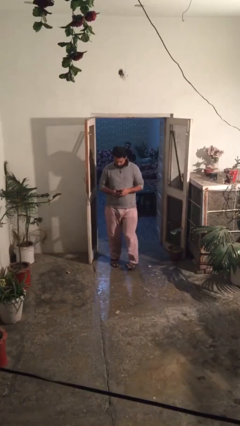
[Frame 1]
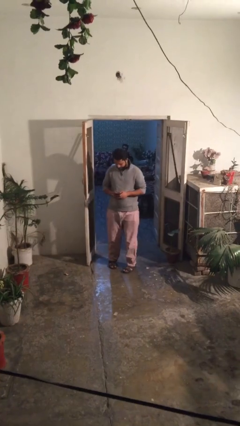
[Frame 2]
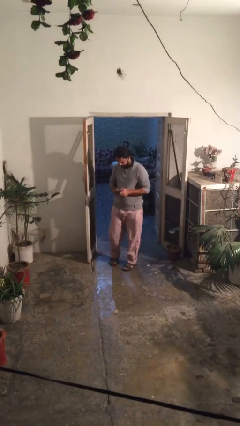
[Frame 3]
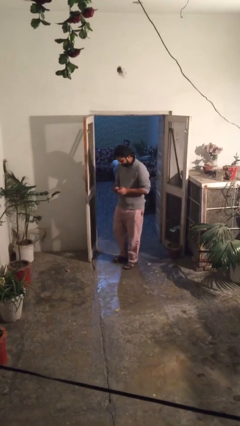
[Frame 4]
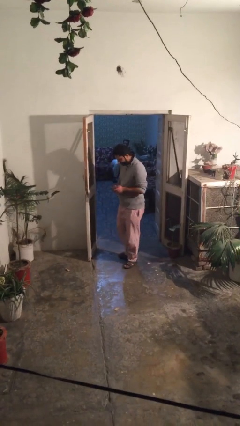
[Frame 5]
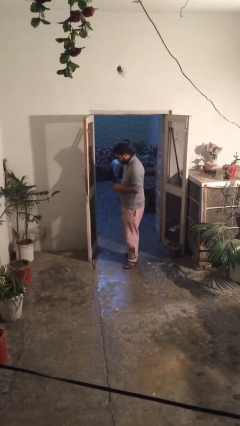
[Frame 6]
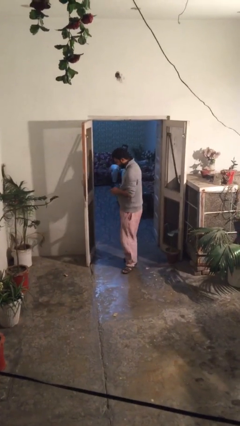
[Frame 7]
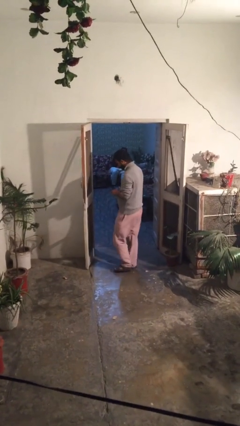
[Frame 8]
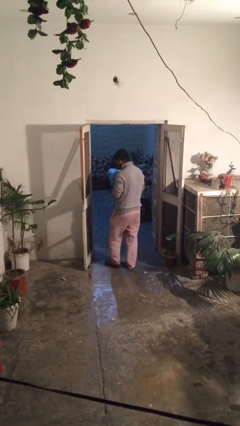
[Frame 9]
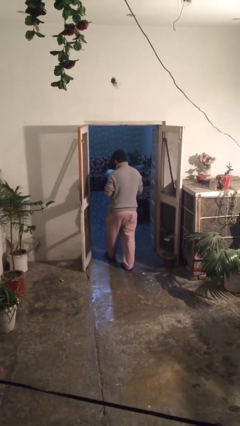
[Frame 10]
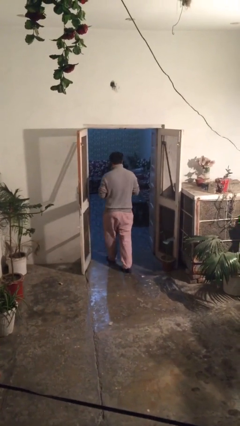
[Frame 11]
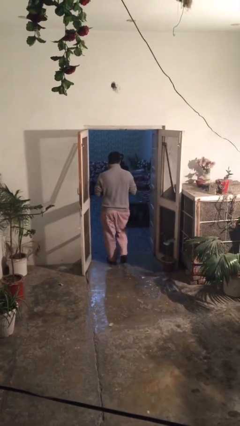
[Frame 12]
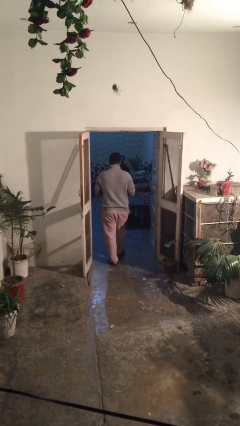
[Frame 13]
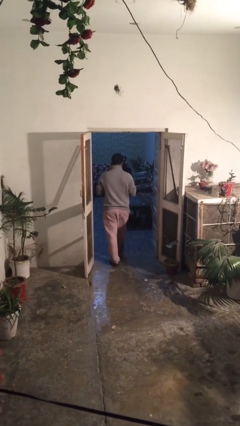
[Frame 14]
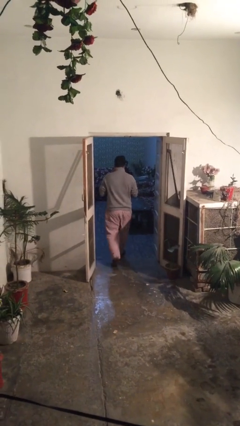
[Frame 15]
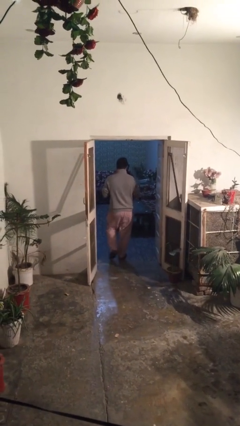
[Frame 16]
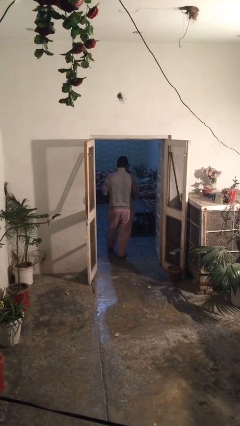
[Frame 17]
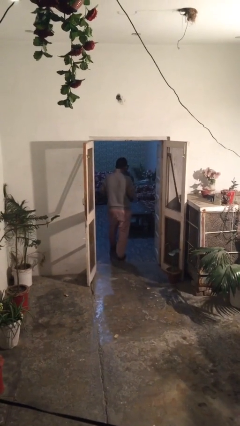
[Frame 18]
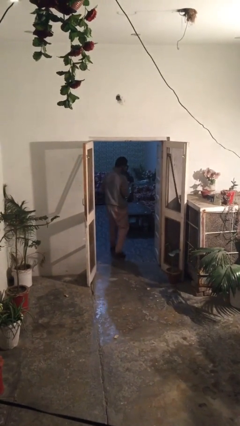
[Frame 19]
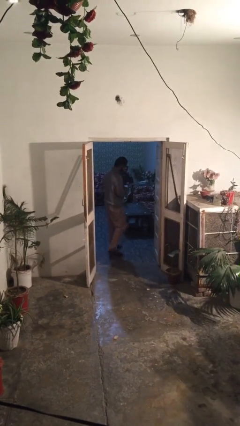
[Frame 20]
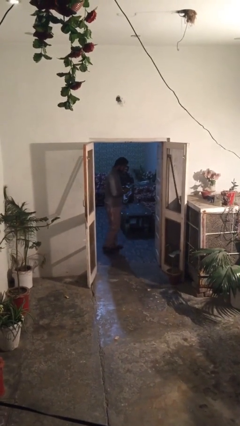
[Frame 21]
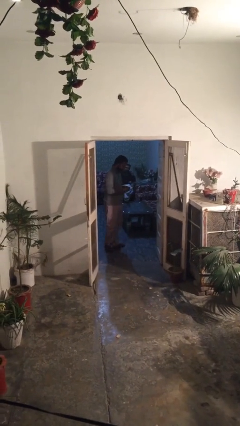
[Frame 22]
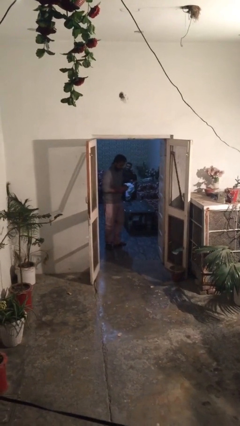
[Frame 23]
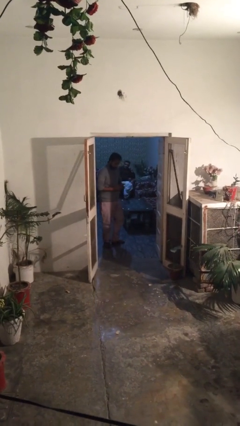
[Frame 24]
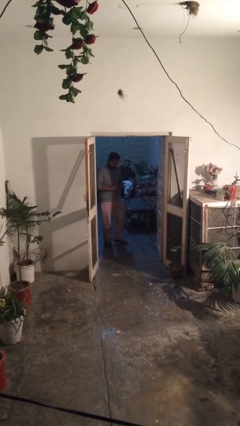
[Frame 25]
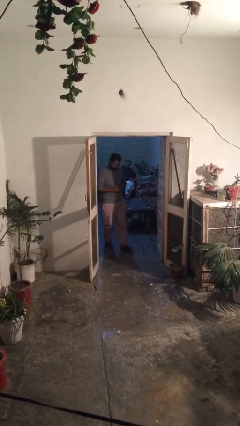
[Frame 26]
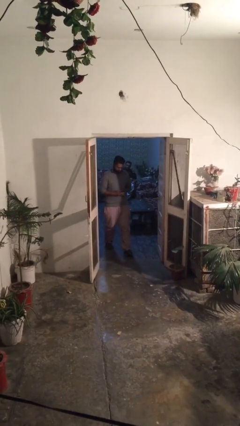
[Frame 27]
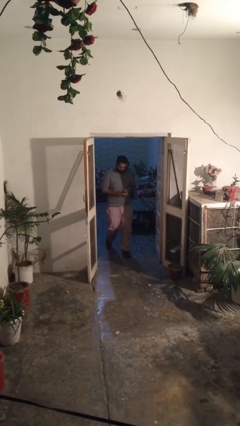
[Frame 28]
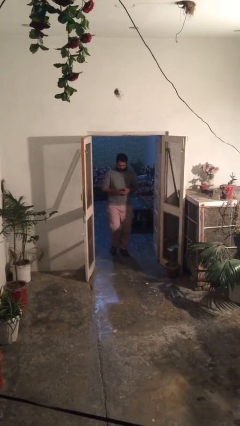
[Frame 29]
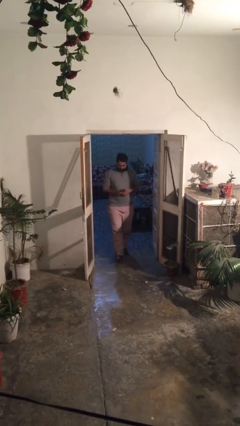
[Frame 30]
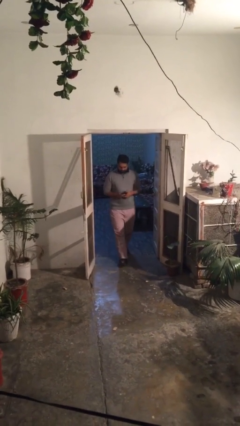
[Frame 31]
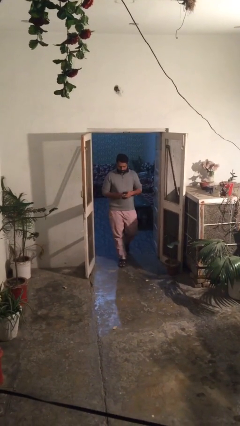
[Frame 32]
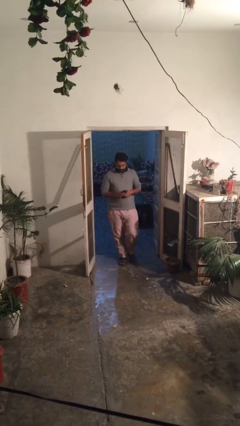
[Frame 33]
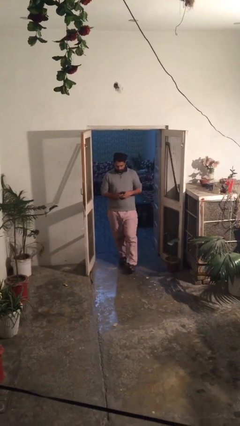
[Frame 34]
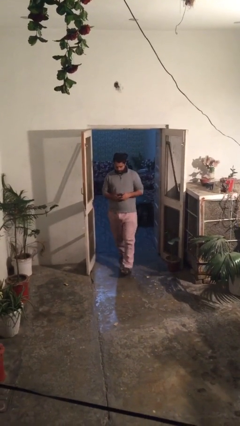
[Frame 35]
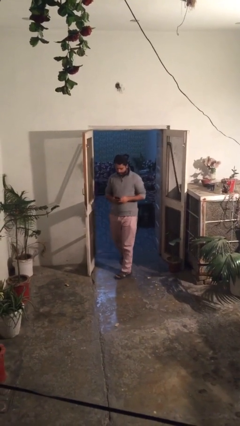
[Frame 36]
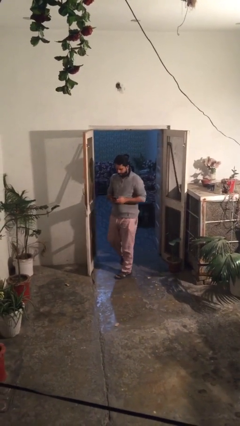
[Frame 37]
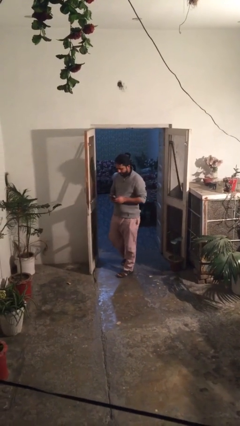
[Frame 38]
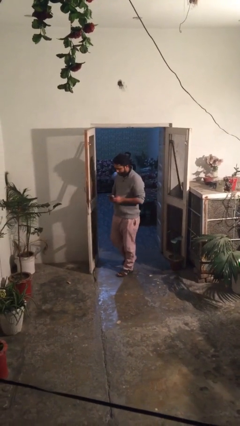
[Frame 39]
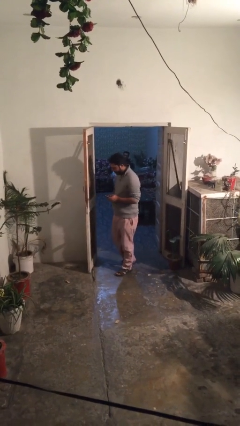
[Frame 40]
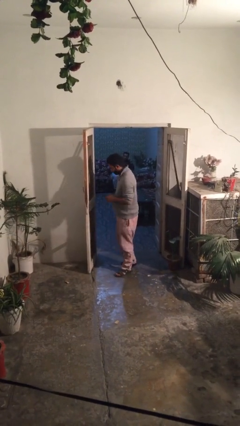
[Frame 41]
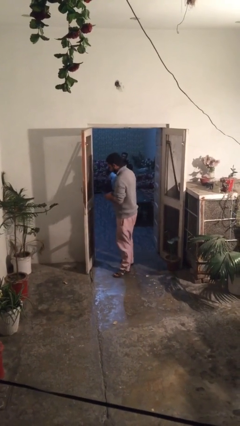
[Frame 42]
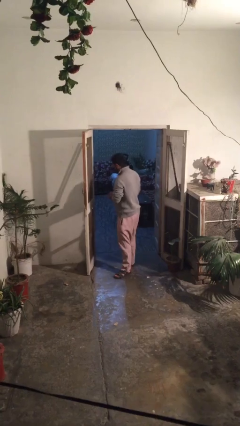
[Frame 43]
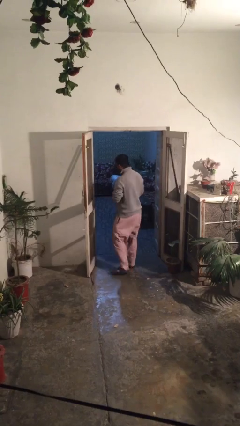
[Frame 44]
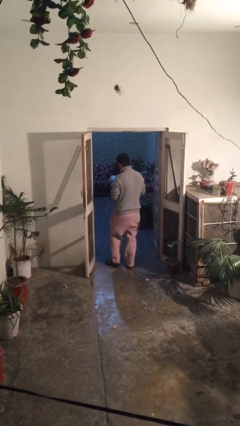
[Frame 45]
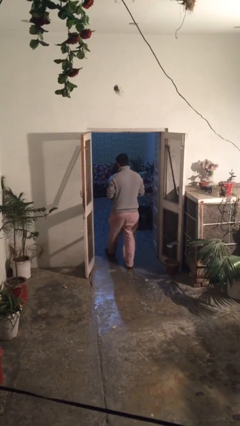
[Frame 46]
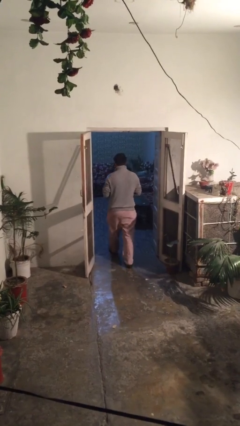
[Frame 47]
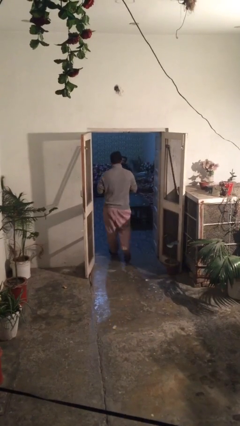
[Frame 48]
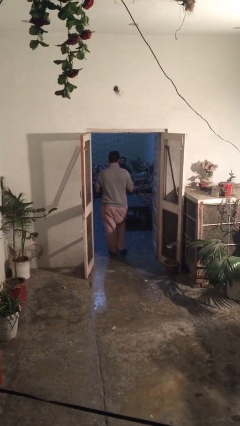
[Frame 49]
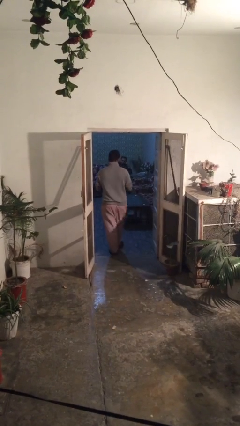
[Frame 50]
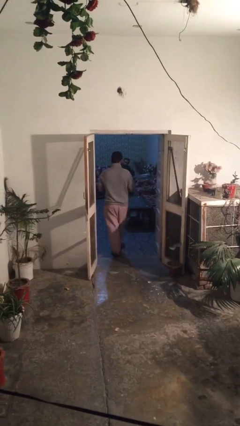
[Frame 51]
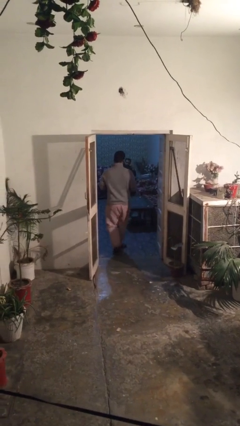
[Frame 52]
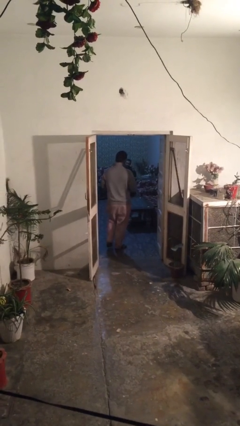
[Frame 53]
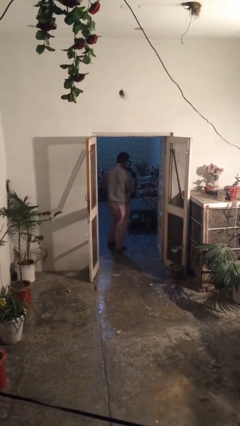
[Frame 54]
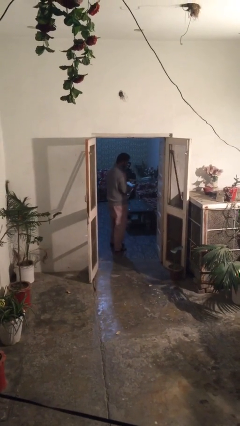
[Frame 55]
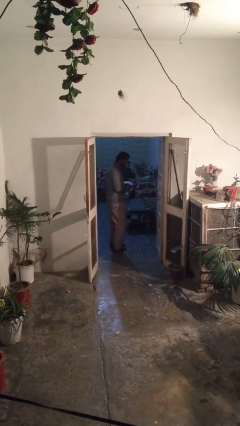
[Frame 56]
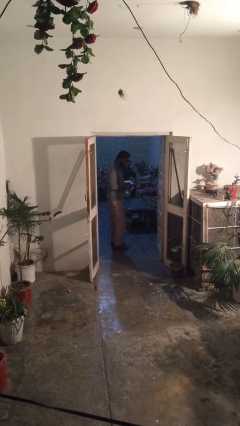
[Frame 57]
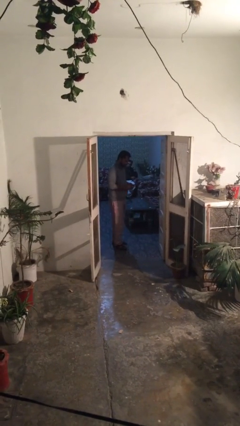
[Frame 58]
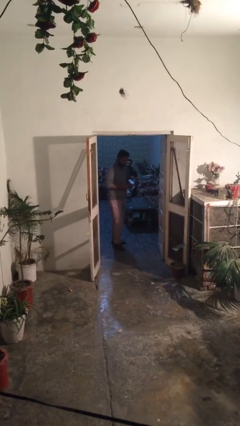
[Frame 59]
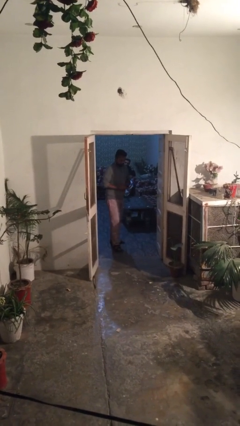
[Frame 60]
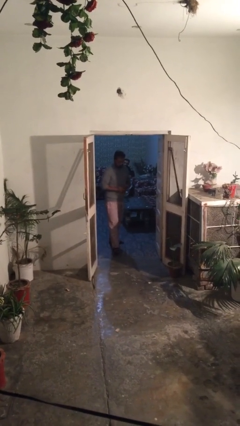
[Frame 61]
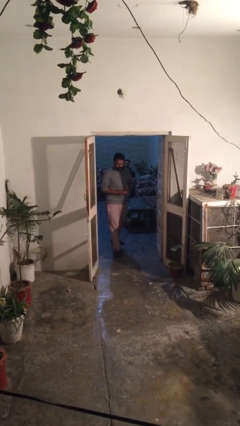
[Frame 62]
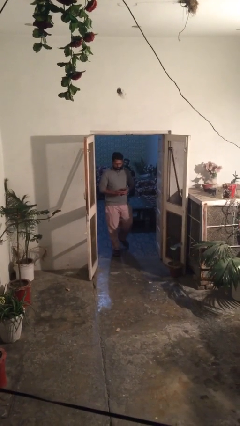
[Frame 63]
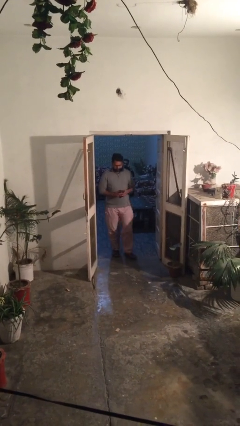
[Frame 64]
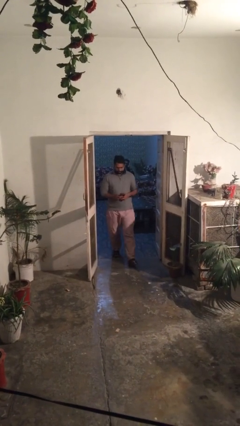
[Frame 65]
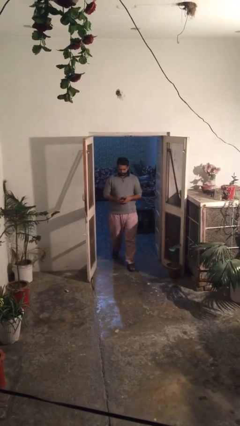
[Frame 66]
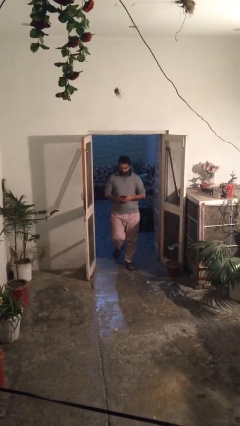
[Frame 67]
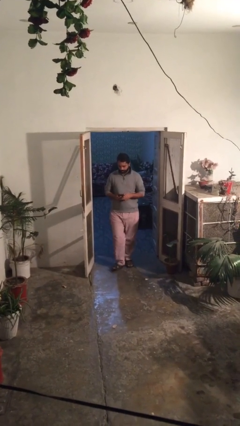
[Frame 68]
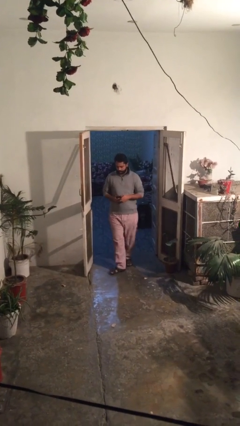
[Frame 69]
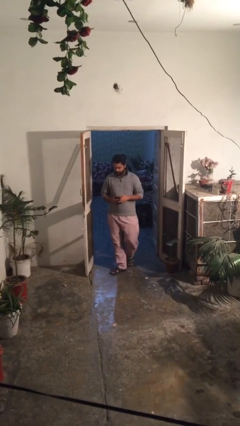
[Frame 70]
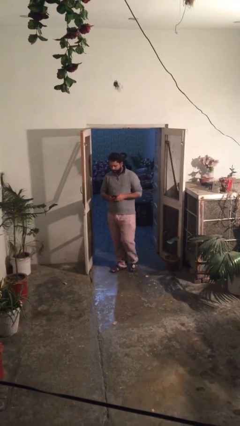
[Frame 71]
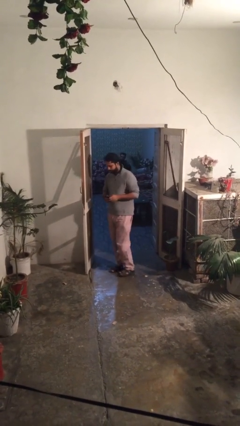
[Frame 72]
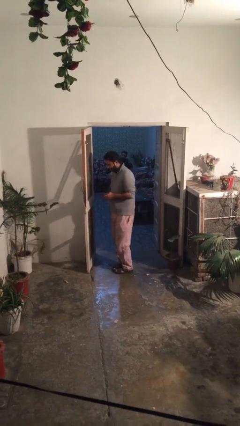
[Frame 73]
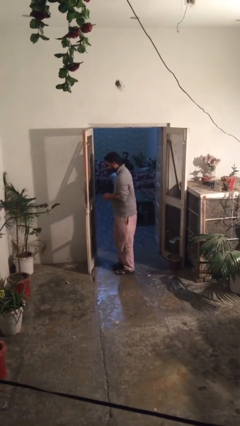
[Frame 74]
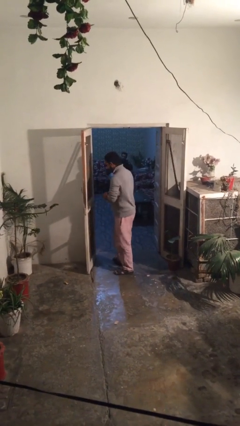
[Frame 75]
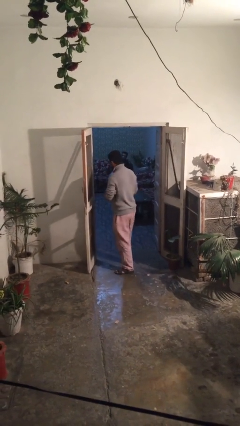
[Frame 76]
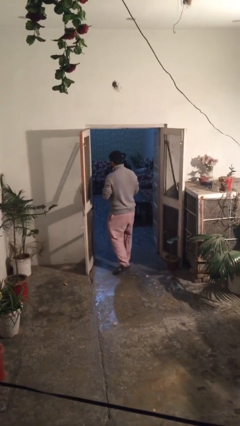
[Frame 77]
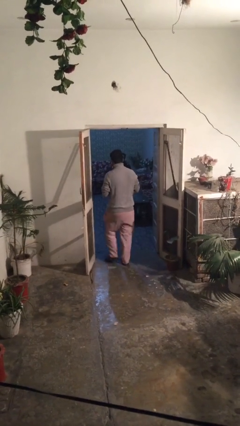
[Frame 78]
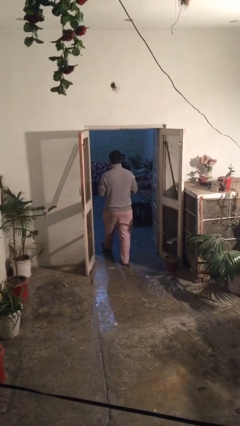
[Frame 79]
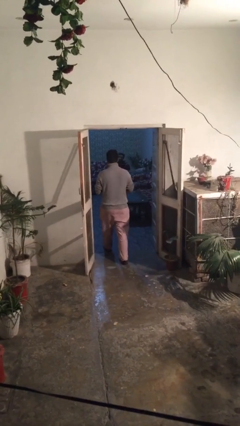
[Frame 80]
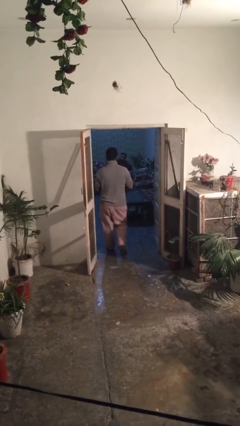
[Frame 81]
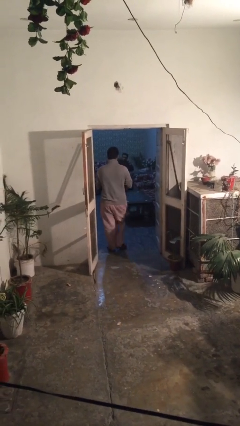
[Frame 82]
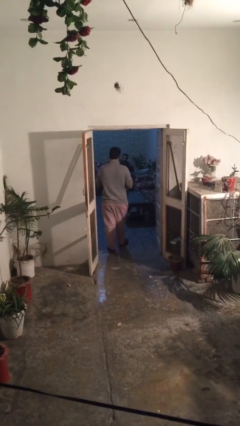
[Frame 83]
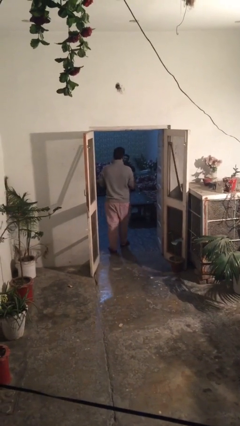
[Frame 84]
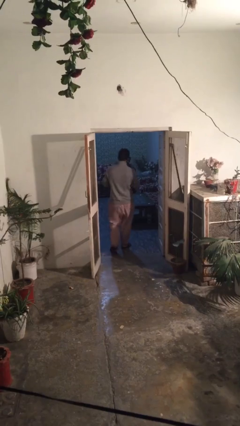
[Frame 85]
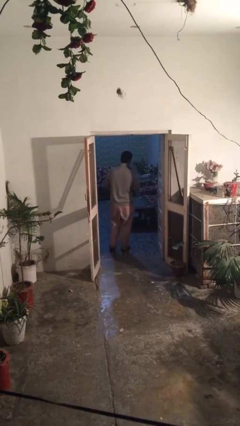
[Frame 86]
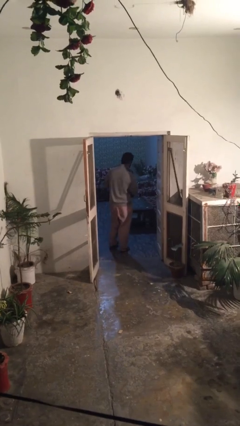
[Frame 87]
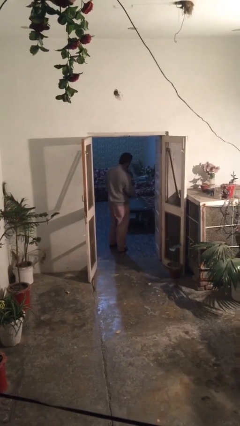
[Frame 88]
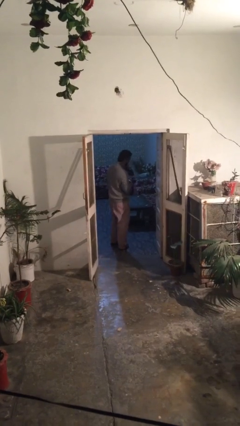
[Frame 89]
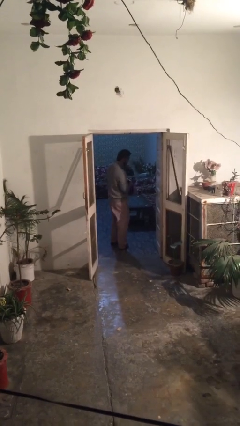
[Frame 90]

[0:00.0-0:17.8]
person texts on phone

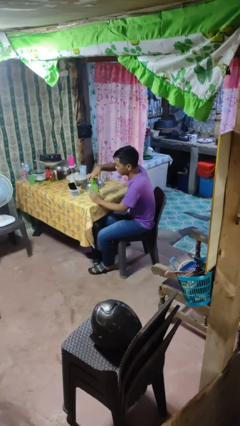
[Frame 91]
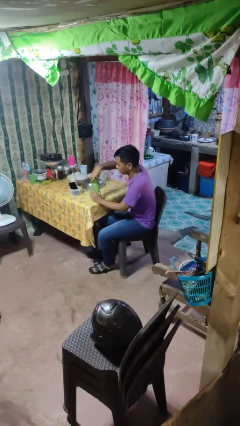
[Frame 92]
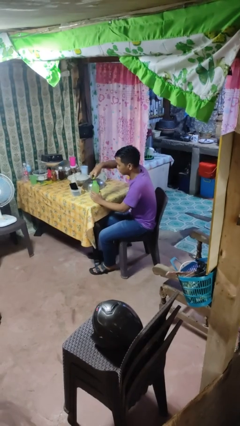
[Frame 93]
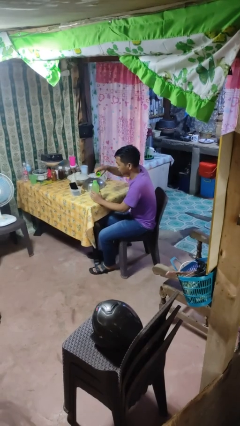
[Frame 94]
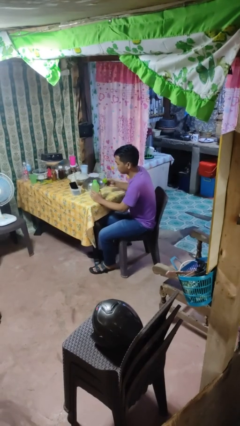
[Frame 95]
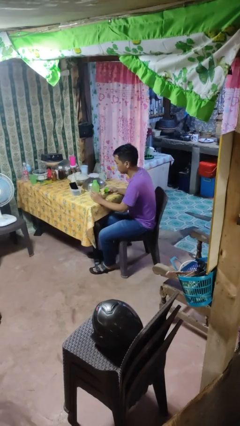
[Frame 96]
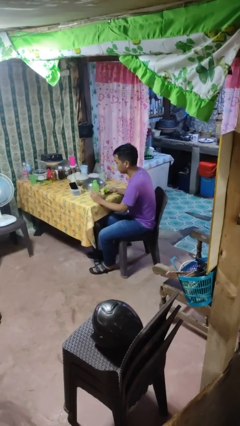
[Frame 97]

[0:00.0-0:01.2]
person unscrews lid from bottle
